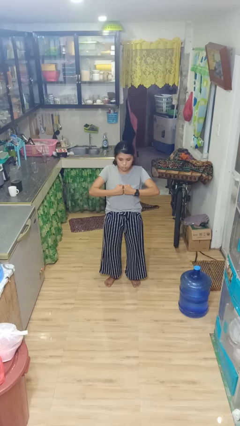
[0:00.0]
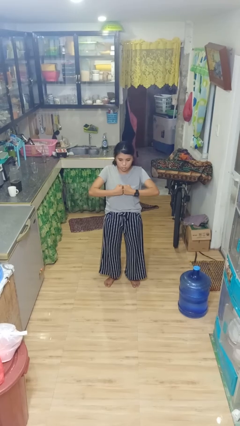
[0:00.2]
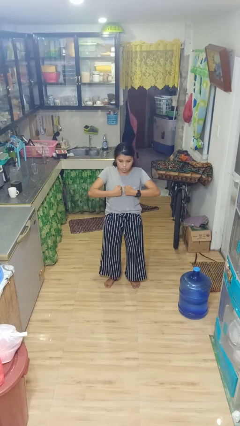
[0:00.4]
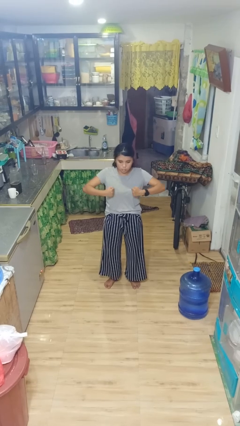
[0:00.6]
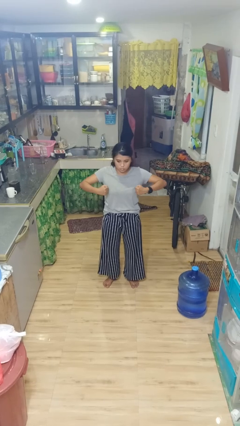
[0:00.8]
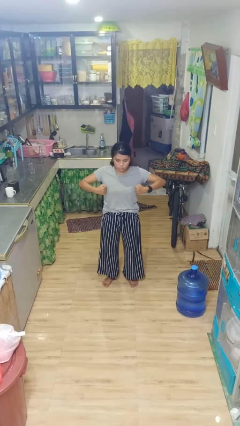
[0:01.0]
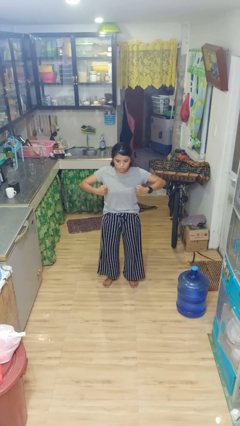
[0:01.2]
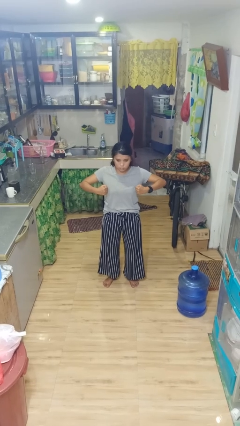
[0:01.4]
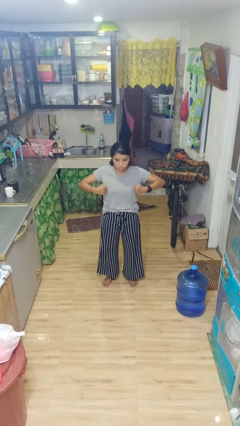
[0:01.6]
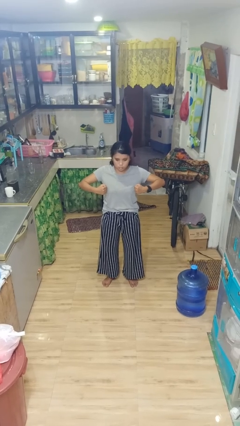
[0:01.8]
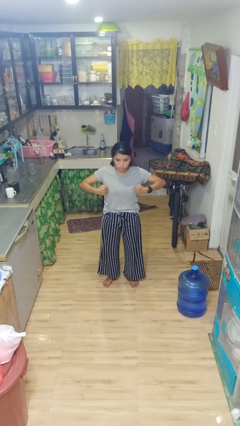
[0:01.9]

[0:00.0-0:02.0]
person gestures zoom in

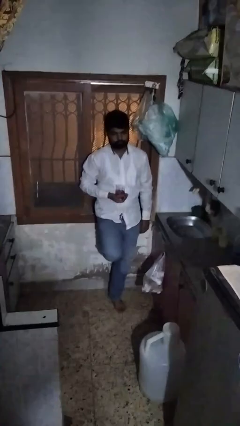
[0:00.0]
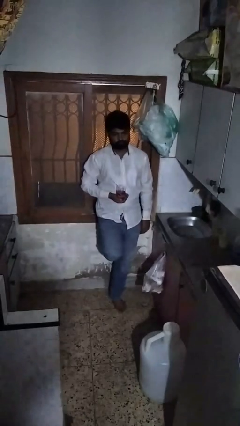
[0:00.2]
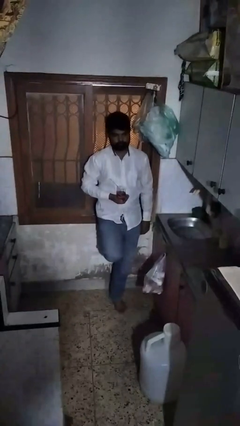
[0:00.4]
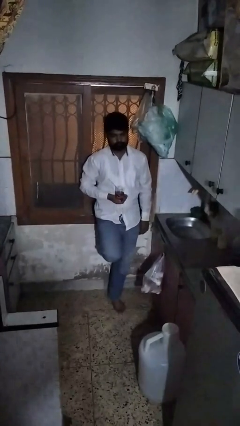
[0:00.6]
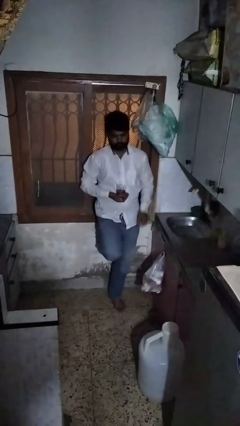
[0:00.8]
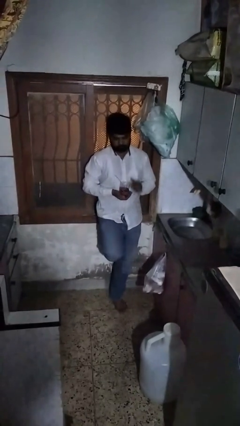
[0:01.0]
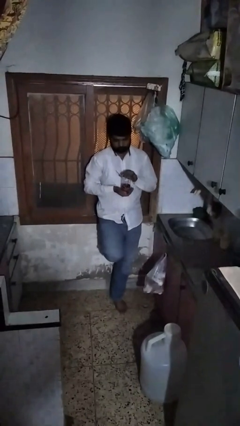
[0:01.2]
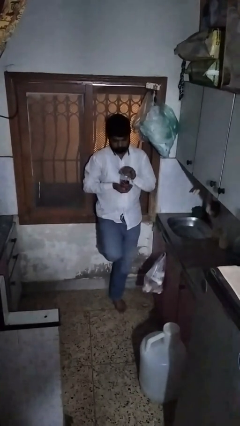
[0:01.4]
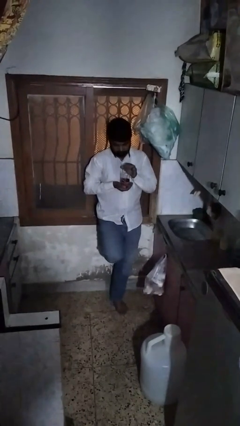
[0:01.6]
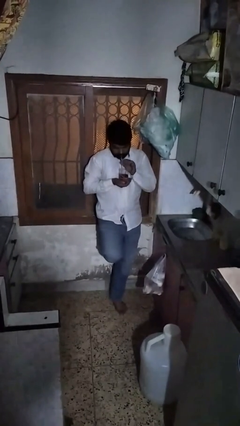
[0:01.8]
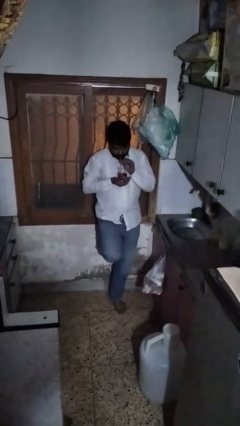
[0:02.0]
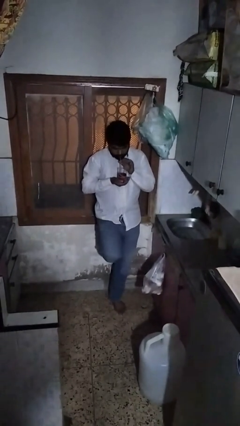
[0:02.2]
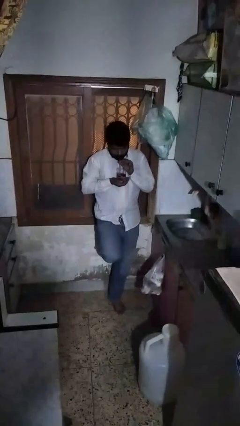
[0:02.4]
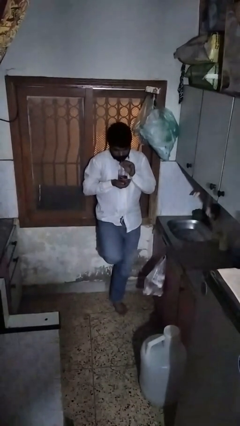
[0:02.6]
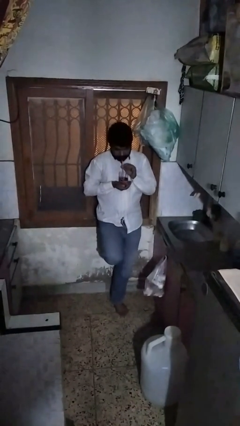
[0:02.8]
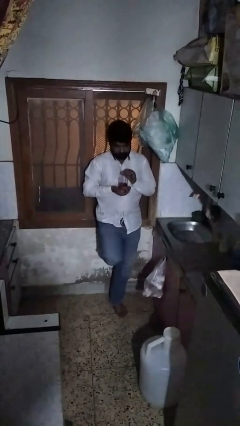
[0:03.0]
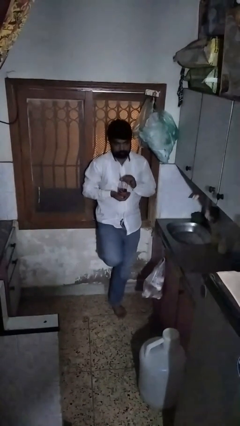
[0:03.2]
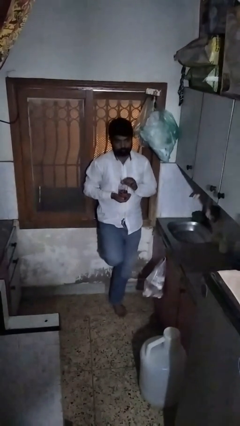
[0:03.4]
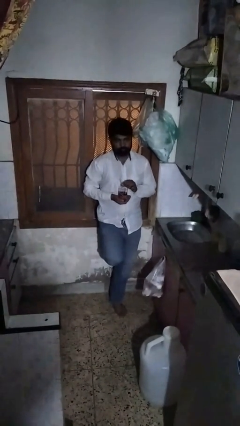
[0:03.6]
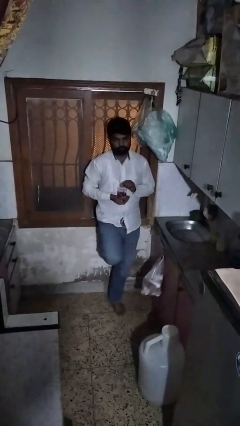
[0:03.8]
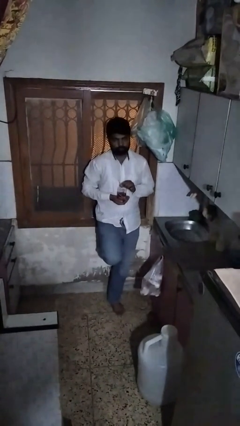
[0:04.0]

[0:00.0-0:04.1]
person drinks from straw

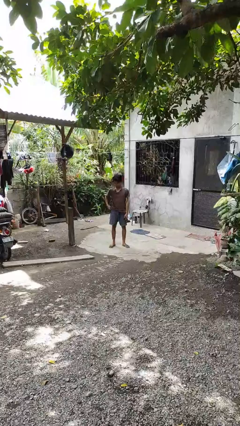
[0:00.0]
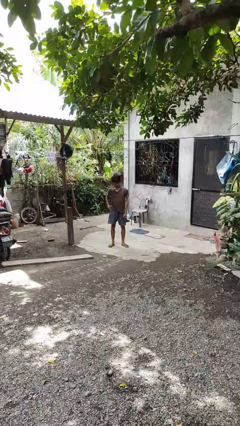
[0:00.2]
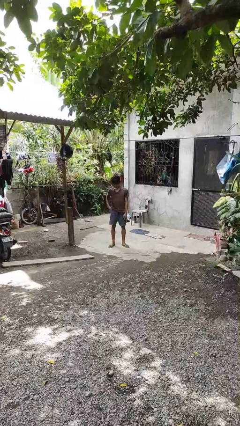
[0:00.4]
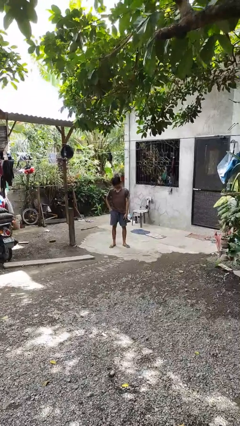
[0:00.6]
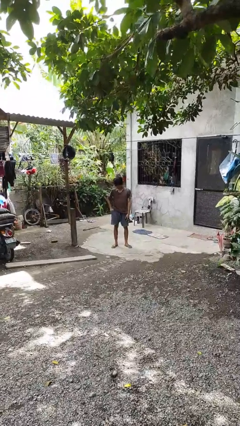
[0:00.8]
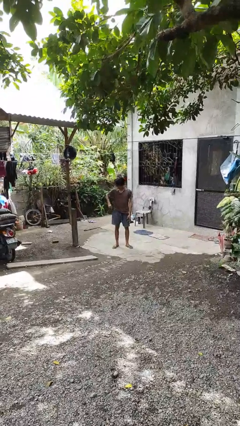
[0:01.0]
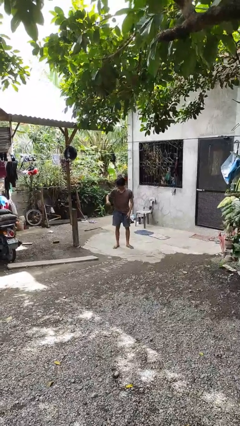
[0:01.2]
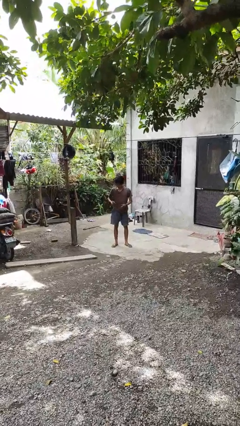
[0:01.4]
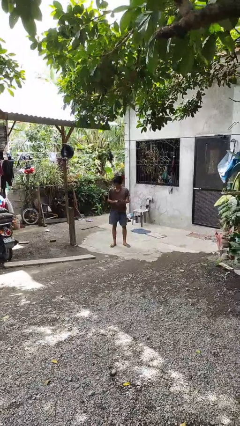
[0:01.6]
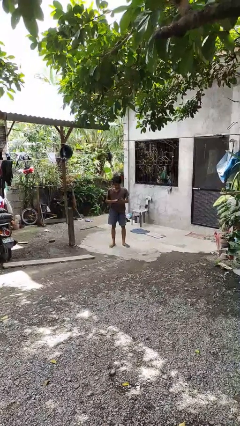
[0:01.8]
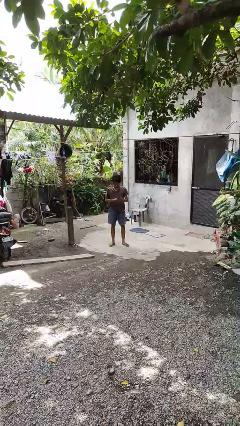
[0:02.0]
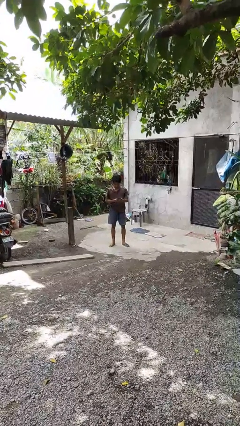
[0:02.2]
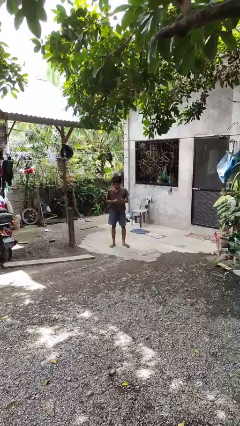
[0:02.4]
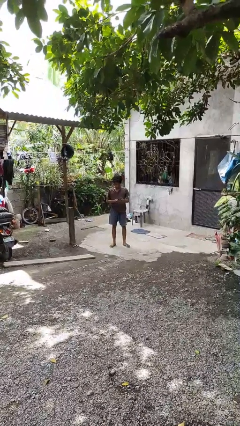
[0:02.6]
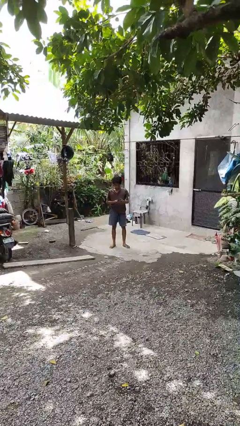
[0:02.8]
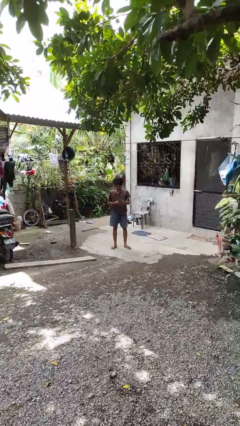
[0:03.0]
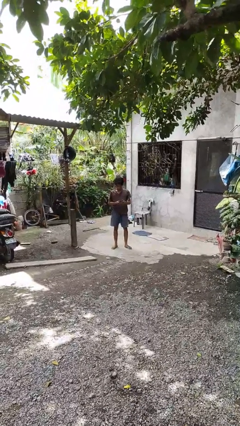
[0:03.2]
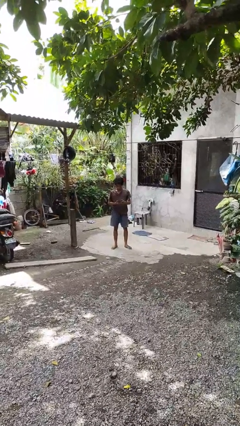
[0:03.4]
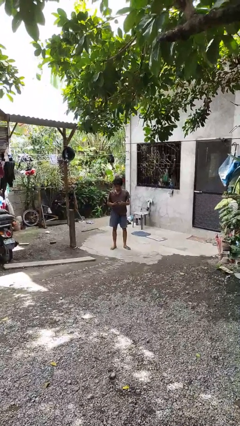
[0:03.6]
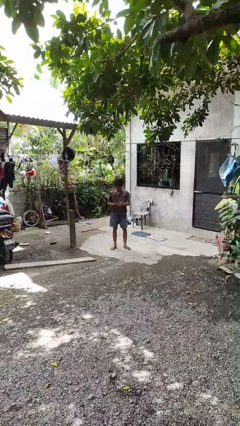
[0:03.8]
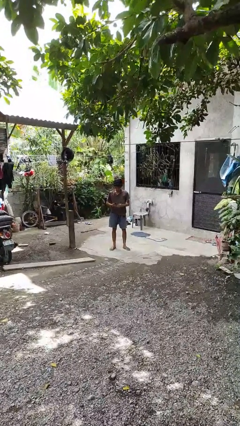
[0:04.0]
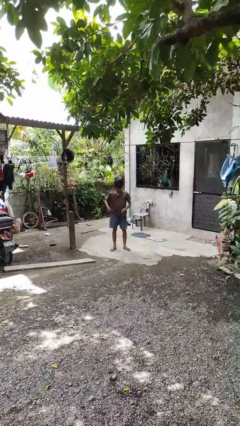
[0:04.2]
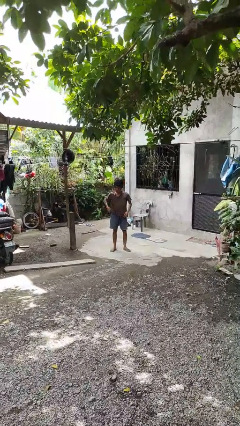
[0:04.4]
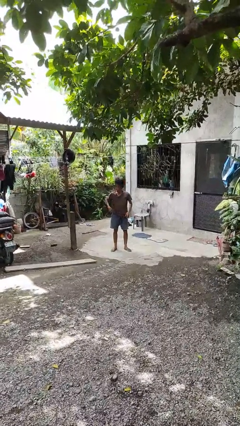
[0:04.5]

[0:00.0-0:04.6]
person takes phone from pocket

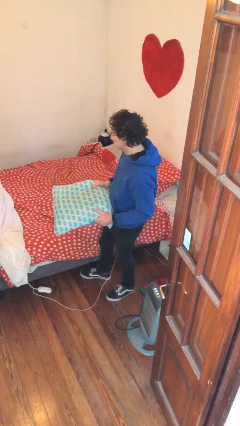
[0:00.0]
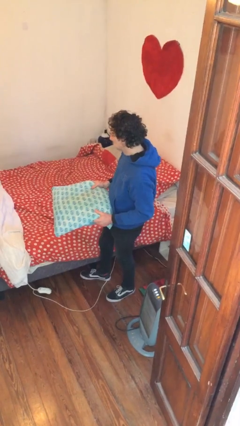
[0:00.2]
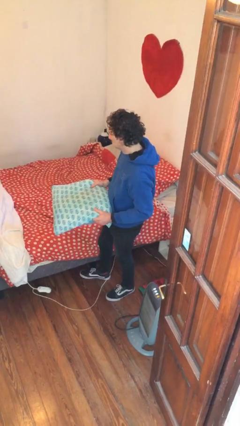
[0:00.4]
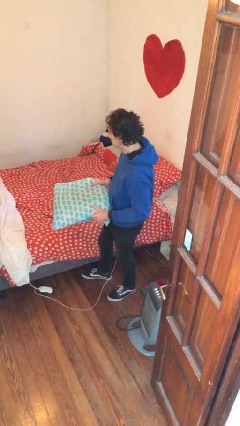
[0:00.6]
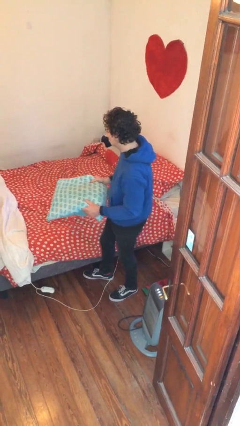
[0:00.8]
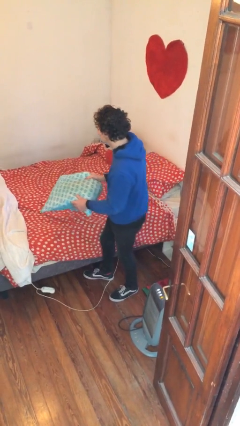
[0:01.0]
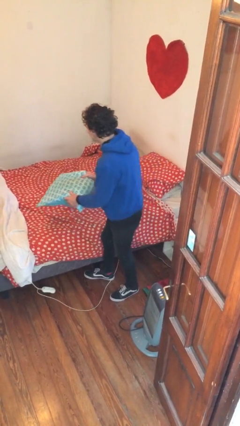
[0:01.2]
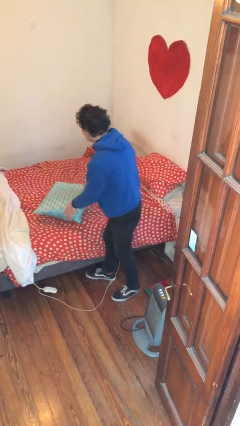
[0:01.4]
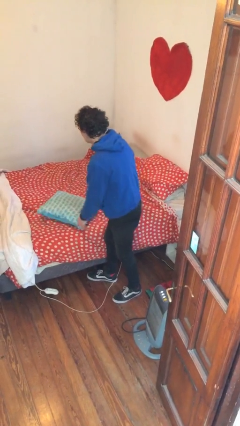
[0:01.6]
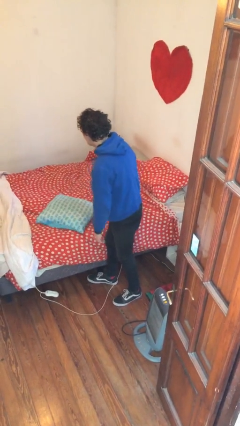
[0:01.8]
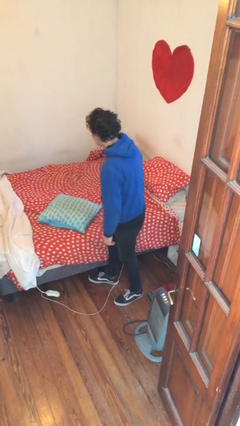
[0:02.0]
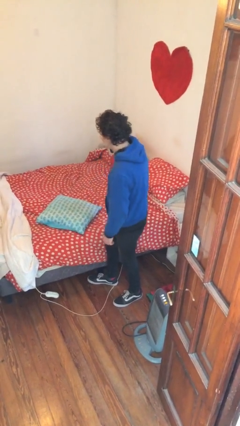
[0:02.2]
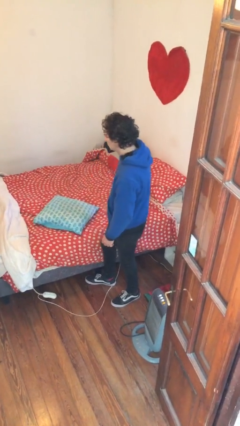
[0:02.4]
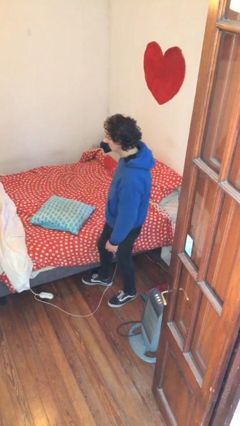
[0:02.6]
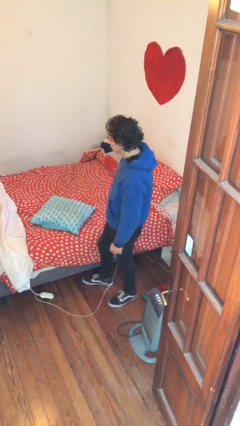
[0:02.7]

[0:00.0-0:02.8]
person puts down object on bed

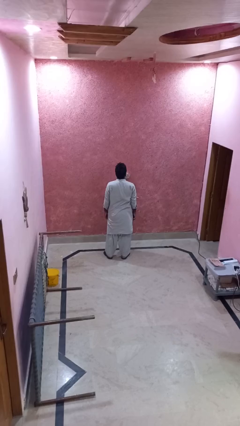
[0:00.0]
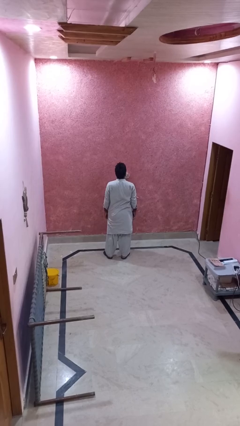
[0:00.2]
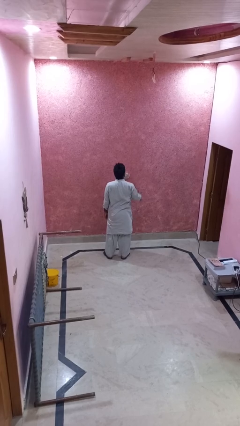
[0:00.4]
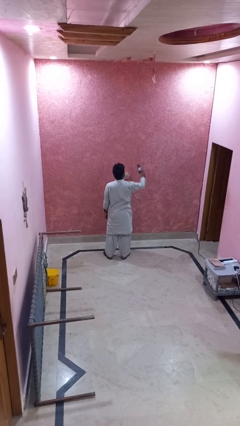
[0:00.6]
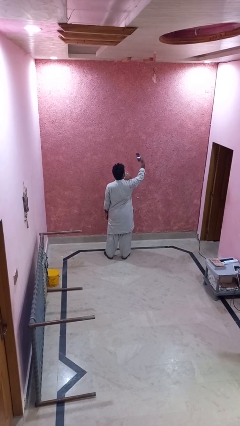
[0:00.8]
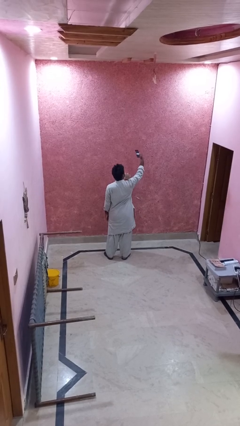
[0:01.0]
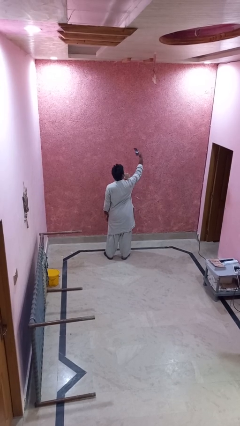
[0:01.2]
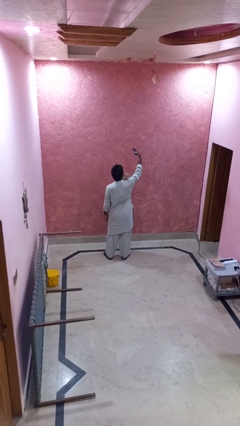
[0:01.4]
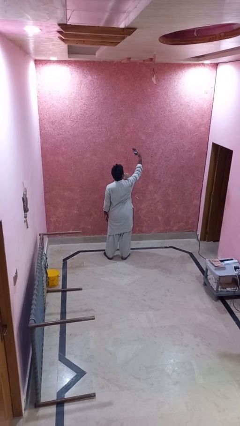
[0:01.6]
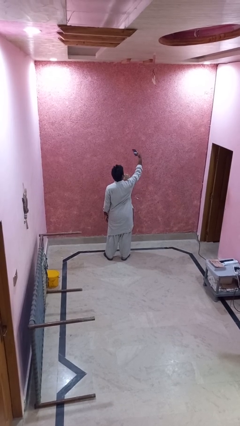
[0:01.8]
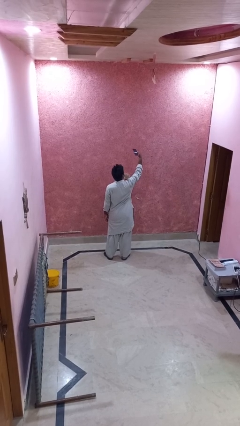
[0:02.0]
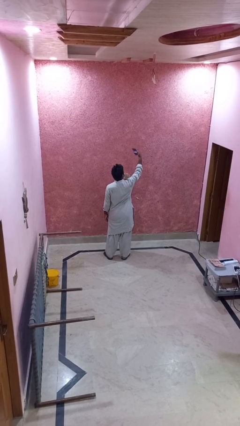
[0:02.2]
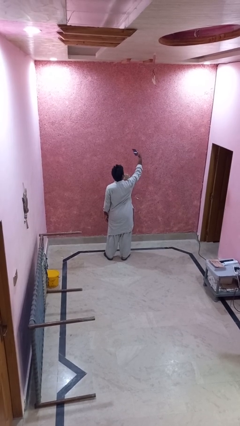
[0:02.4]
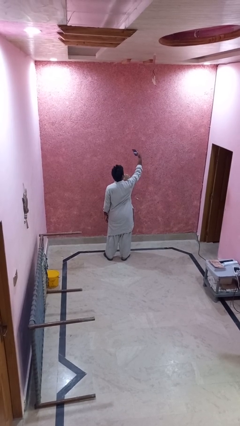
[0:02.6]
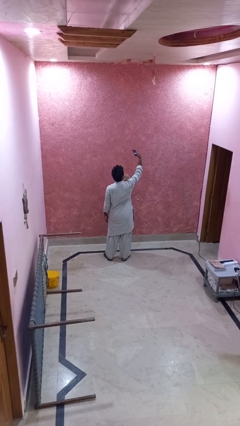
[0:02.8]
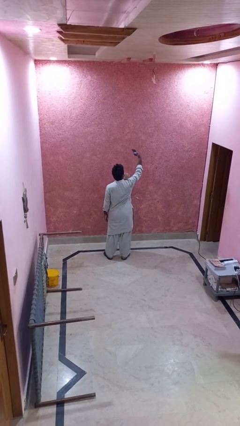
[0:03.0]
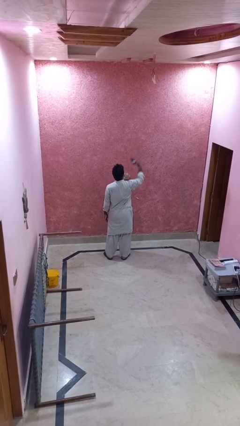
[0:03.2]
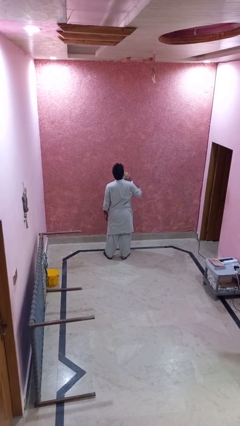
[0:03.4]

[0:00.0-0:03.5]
person takes selfie

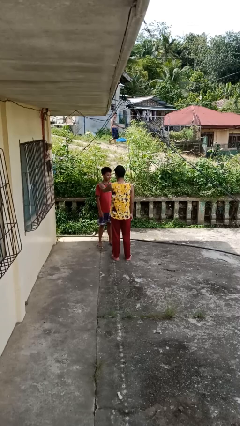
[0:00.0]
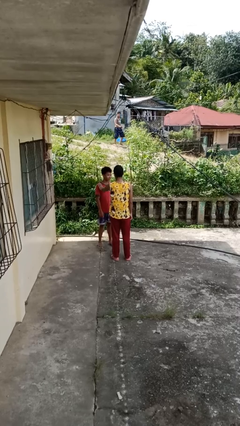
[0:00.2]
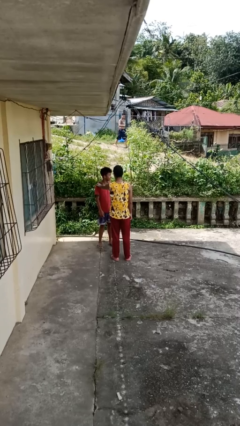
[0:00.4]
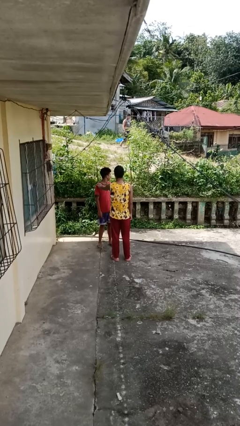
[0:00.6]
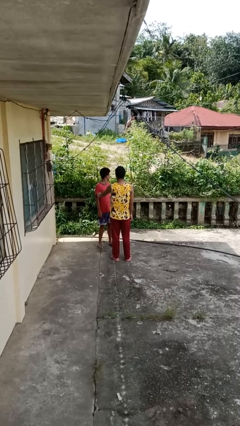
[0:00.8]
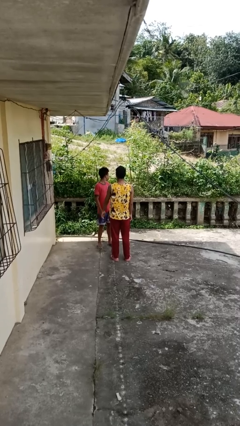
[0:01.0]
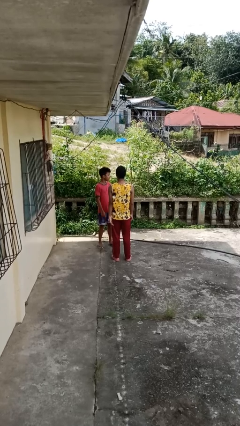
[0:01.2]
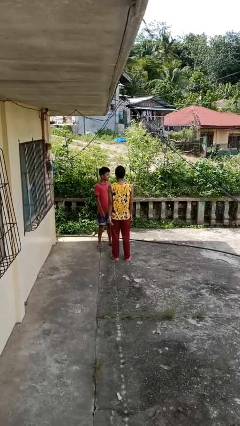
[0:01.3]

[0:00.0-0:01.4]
person shoves person
